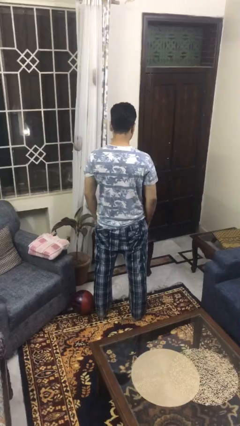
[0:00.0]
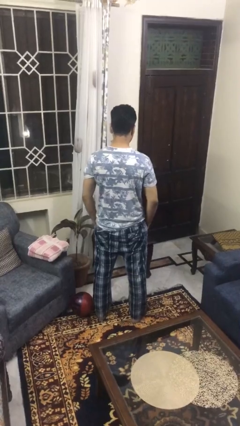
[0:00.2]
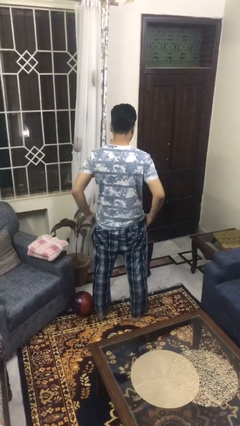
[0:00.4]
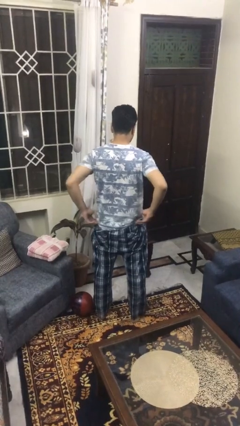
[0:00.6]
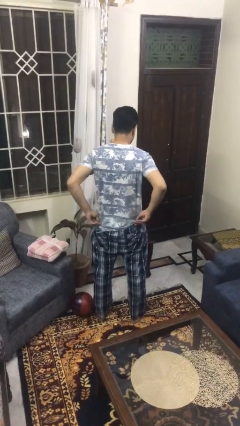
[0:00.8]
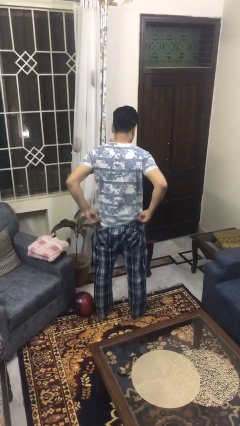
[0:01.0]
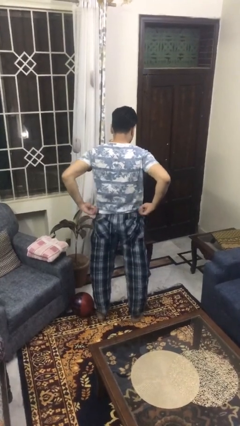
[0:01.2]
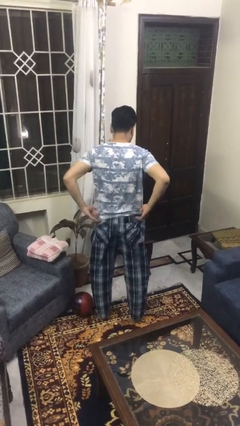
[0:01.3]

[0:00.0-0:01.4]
person puts hands in back pockets

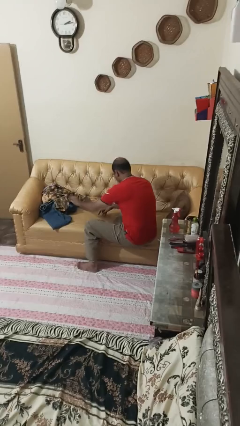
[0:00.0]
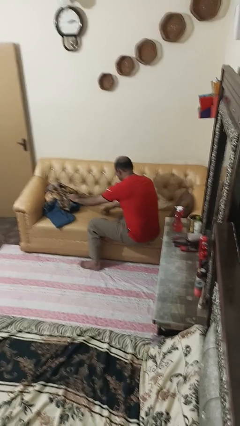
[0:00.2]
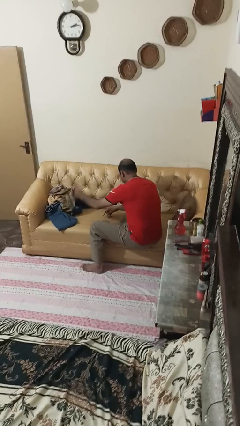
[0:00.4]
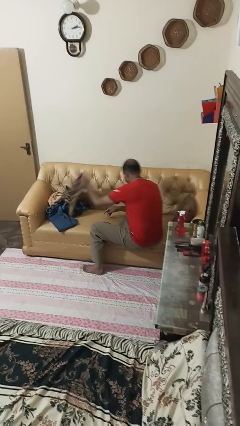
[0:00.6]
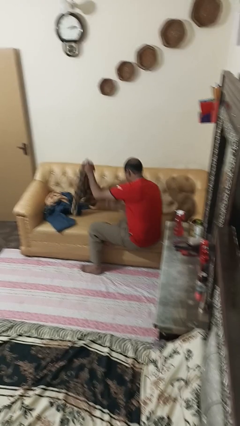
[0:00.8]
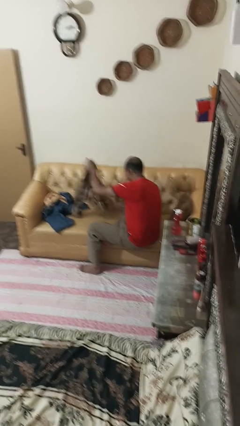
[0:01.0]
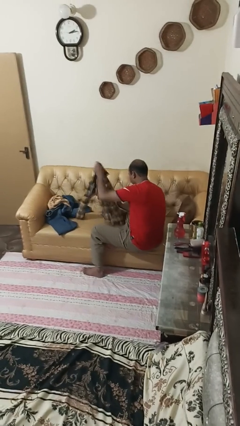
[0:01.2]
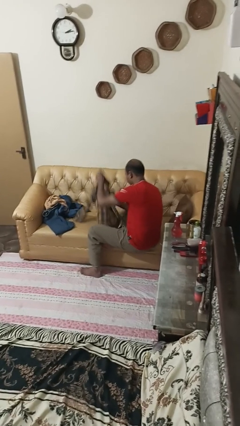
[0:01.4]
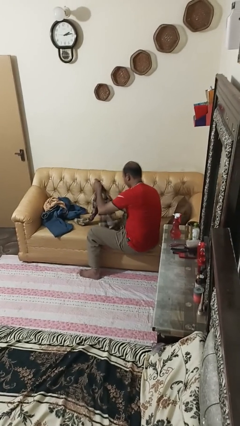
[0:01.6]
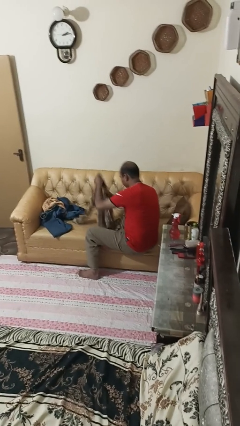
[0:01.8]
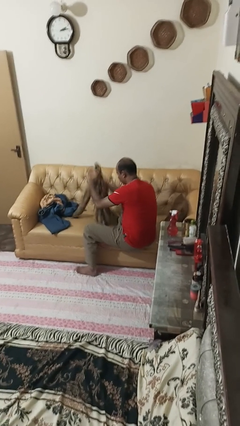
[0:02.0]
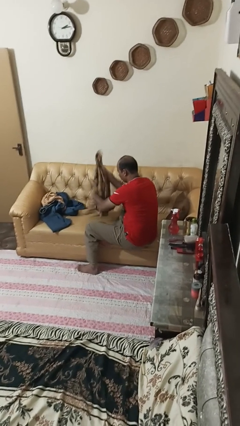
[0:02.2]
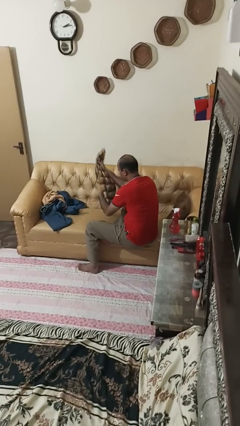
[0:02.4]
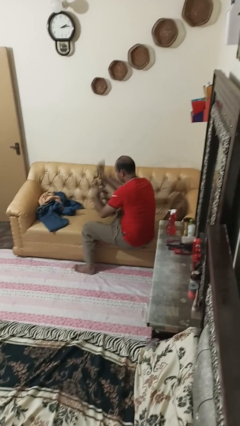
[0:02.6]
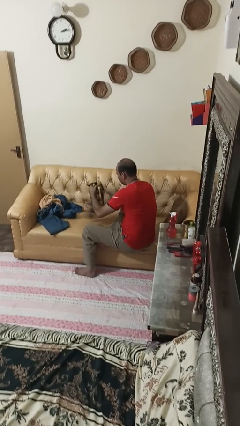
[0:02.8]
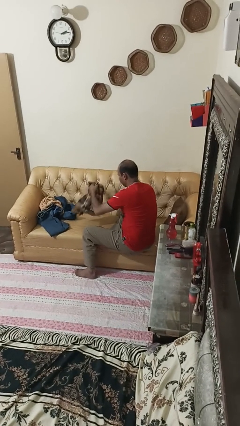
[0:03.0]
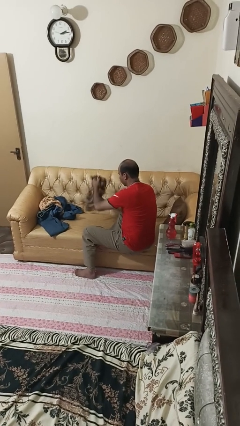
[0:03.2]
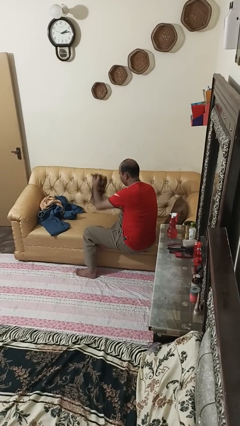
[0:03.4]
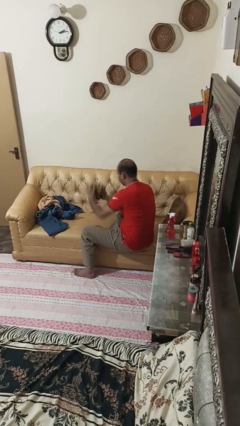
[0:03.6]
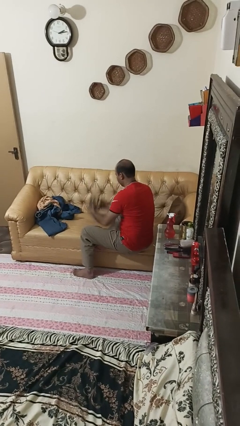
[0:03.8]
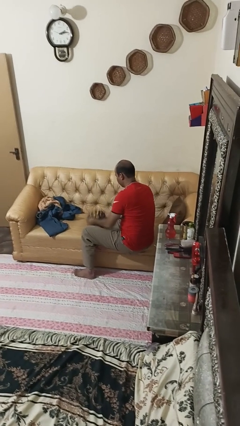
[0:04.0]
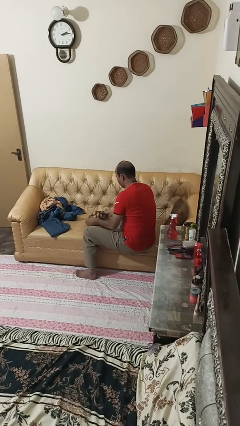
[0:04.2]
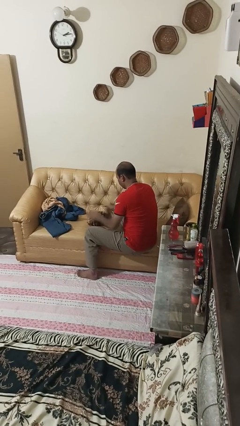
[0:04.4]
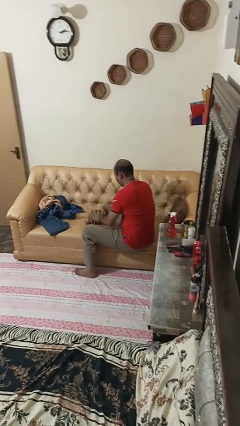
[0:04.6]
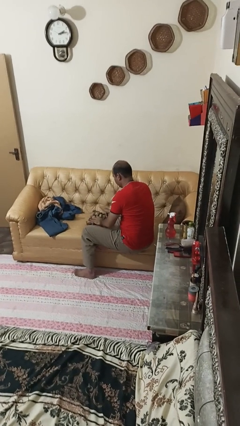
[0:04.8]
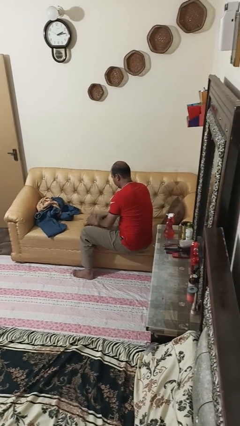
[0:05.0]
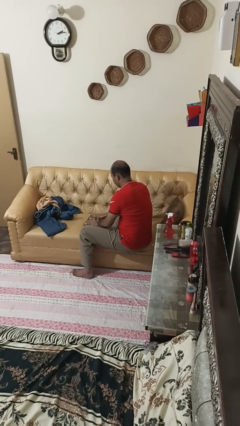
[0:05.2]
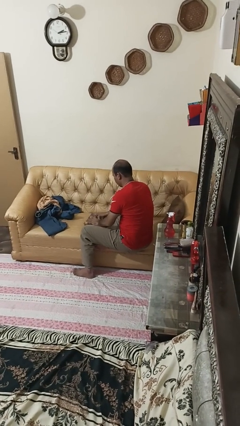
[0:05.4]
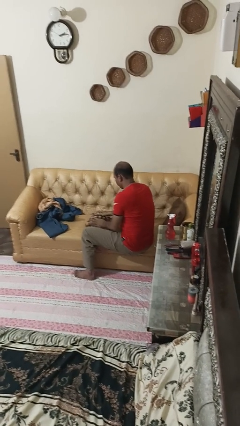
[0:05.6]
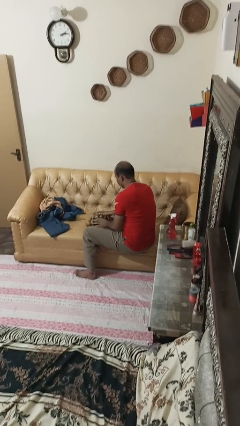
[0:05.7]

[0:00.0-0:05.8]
person folds shirt

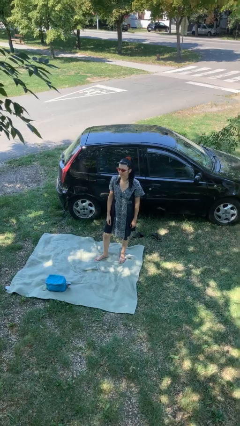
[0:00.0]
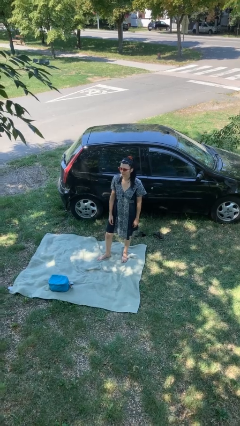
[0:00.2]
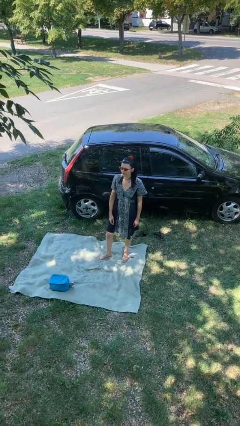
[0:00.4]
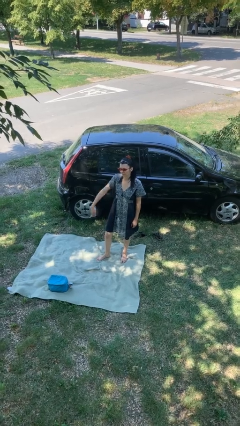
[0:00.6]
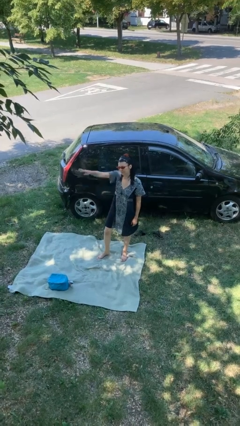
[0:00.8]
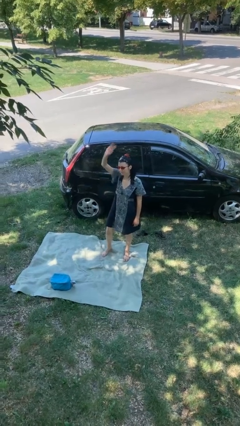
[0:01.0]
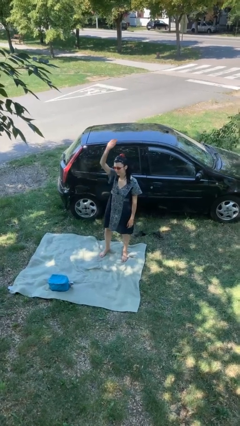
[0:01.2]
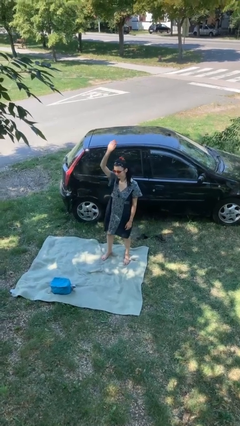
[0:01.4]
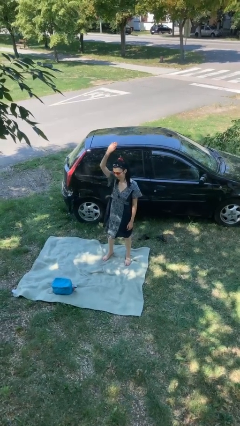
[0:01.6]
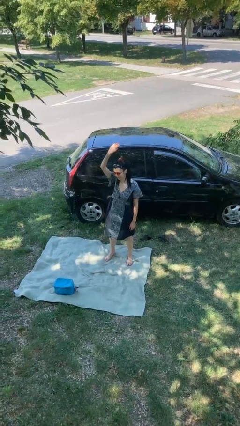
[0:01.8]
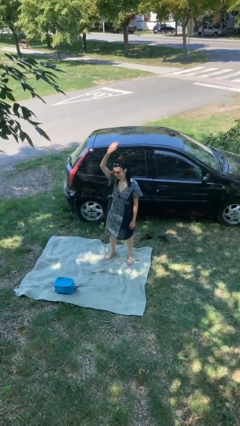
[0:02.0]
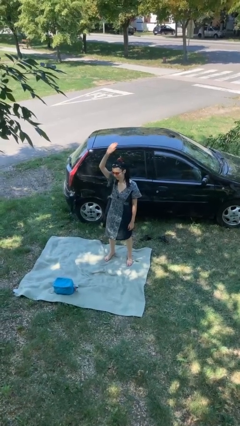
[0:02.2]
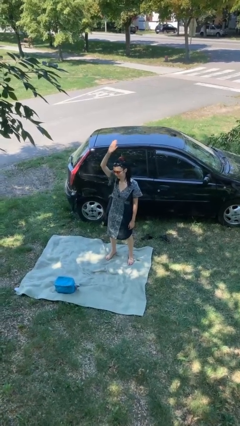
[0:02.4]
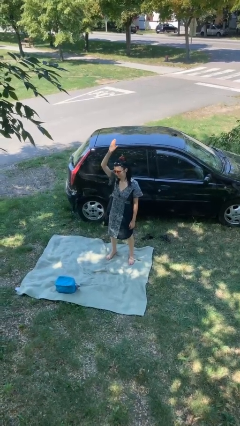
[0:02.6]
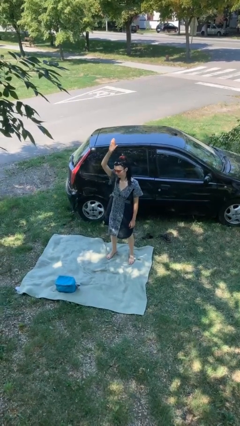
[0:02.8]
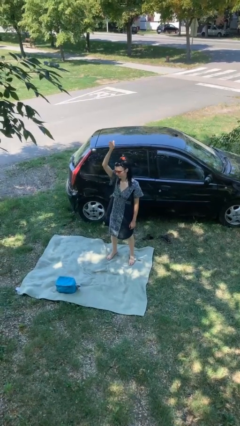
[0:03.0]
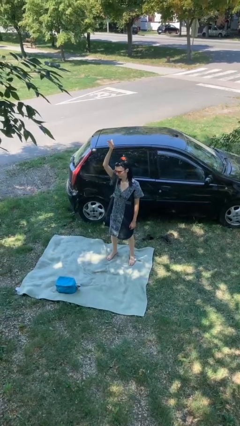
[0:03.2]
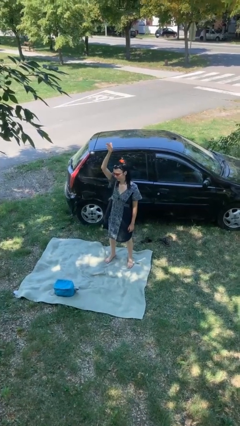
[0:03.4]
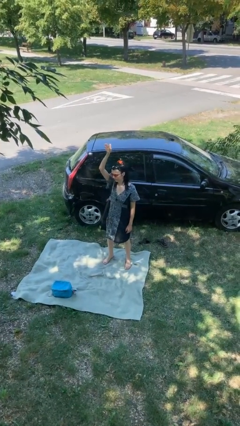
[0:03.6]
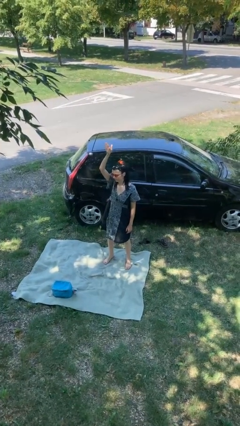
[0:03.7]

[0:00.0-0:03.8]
person gestures raise hand

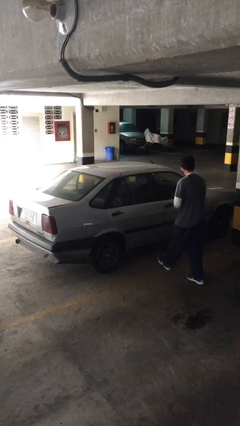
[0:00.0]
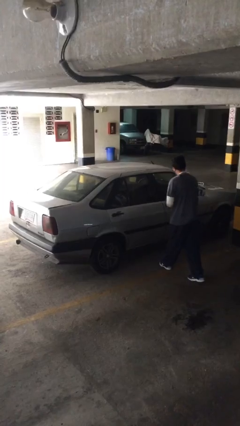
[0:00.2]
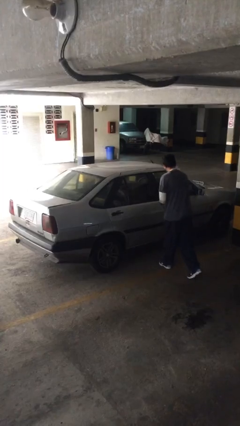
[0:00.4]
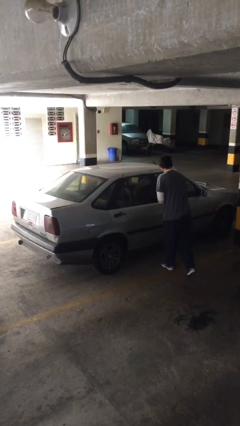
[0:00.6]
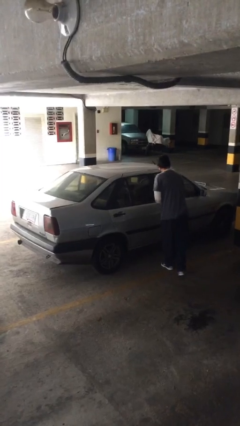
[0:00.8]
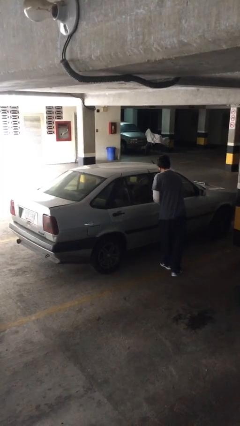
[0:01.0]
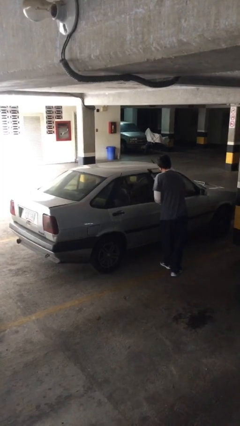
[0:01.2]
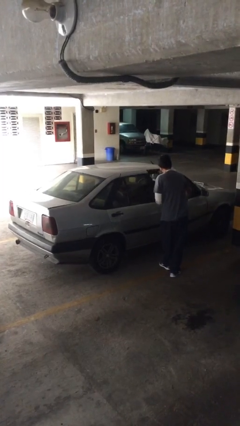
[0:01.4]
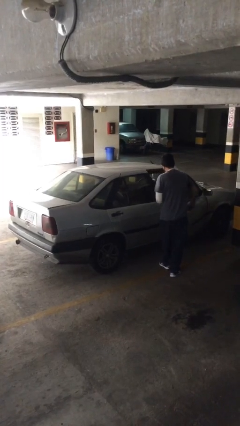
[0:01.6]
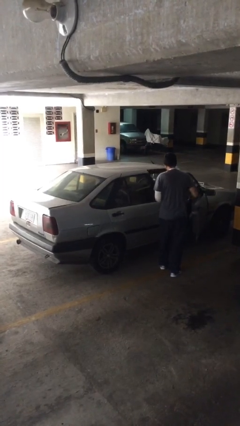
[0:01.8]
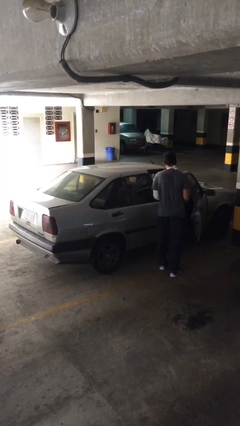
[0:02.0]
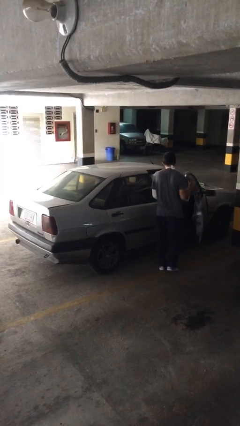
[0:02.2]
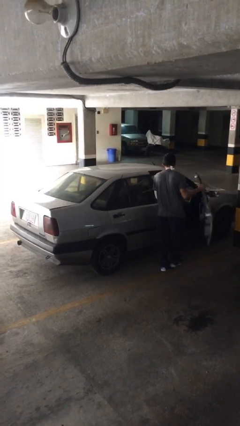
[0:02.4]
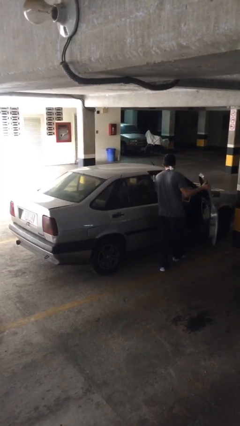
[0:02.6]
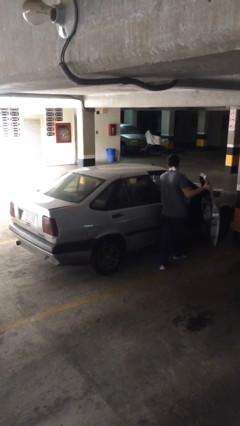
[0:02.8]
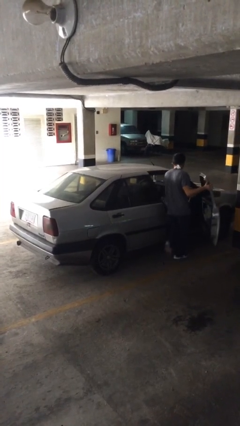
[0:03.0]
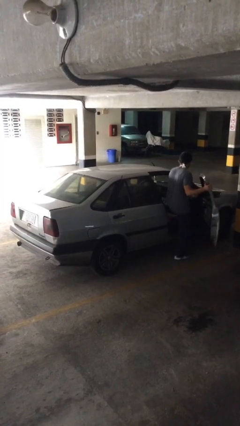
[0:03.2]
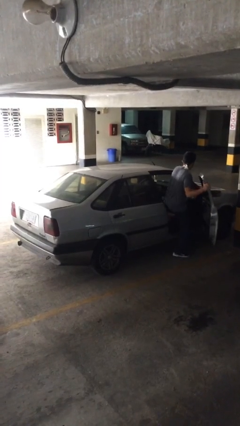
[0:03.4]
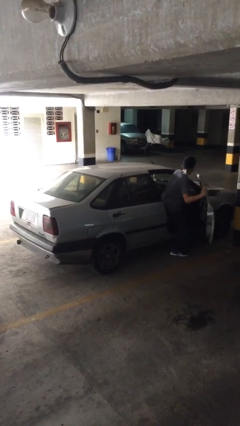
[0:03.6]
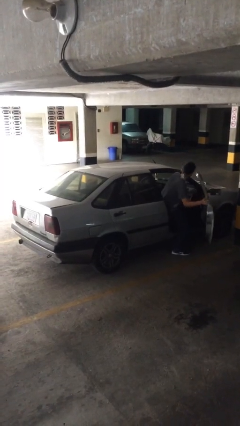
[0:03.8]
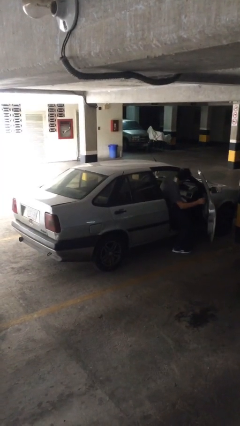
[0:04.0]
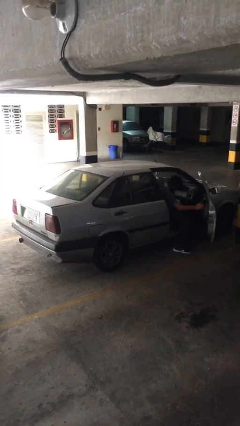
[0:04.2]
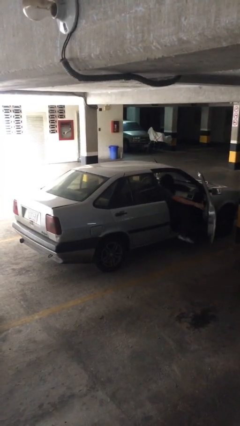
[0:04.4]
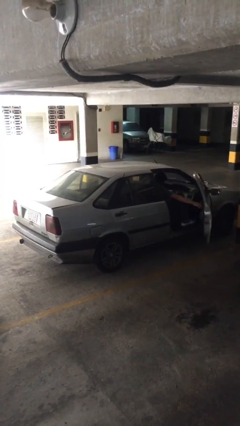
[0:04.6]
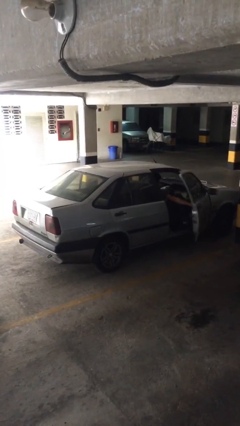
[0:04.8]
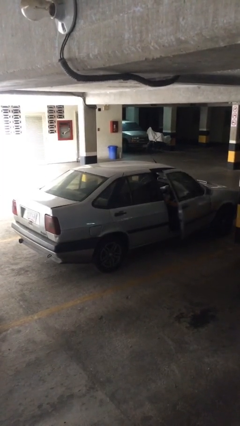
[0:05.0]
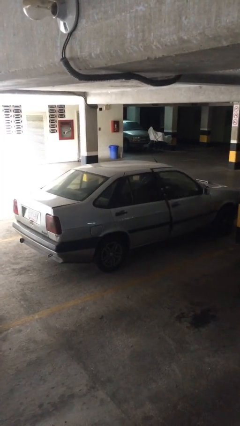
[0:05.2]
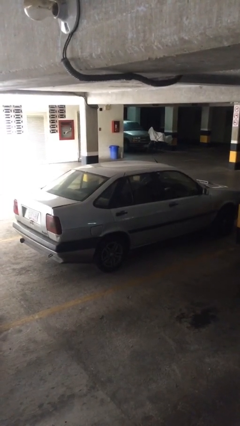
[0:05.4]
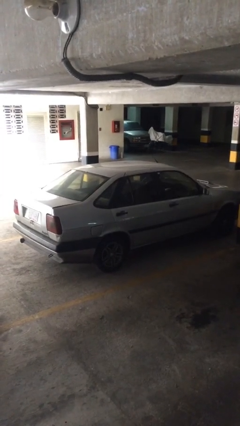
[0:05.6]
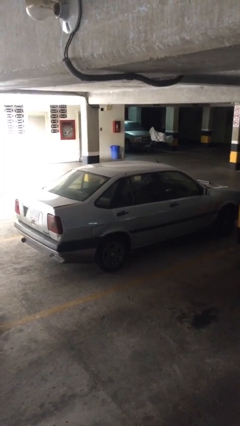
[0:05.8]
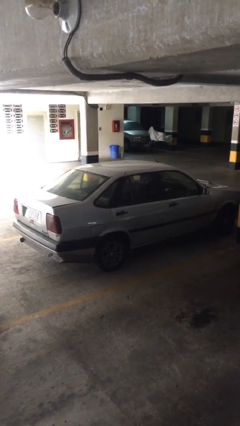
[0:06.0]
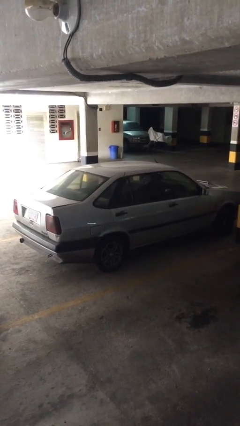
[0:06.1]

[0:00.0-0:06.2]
car picks up person

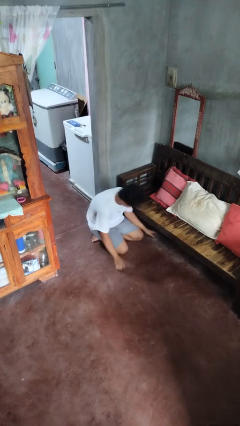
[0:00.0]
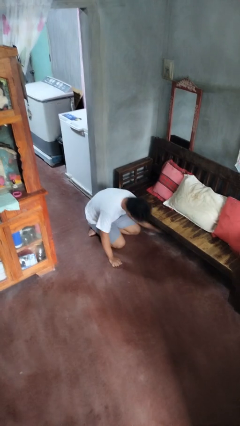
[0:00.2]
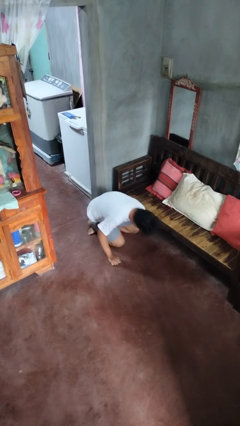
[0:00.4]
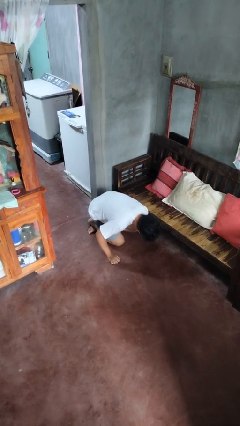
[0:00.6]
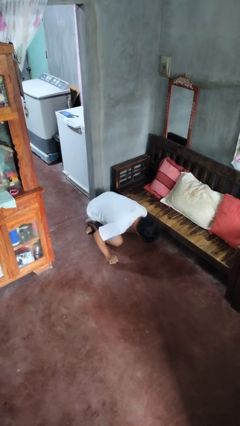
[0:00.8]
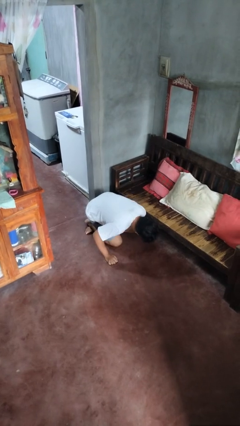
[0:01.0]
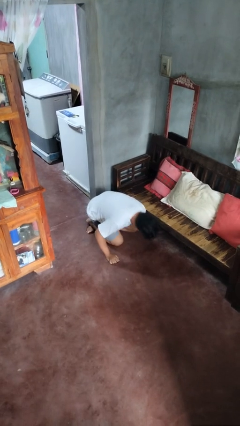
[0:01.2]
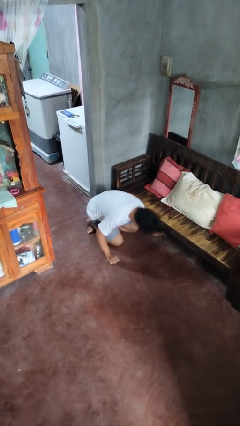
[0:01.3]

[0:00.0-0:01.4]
person searches under couch
